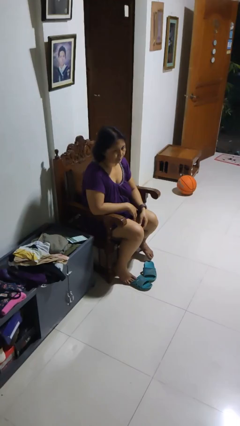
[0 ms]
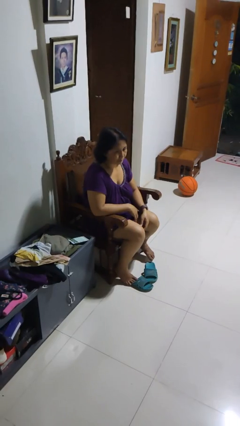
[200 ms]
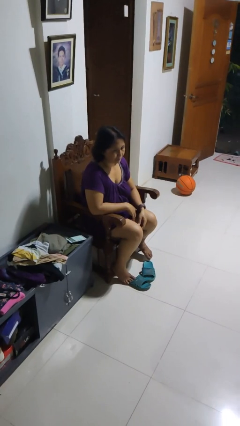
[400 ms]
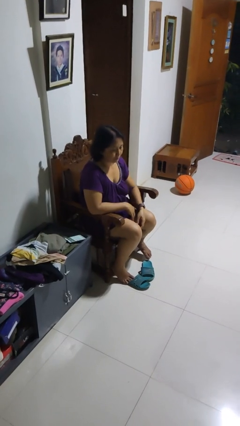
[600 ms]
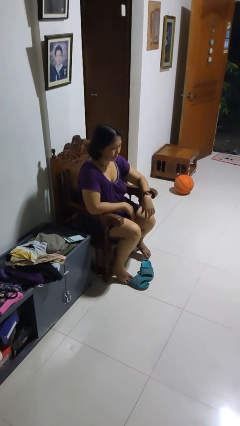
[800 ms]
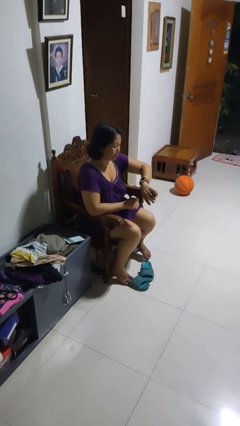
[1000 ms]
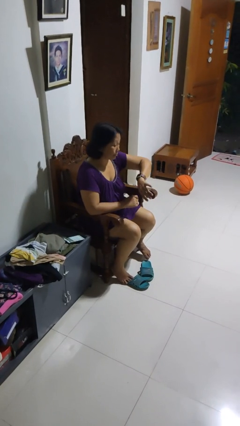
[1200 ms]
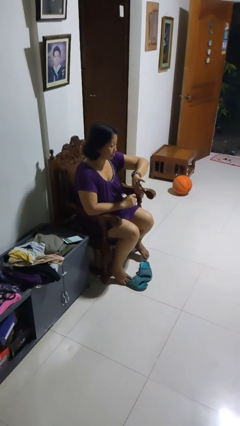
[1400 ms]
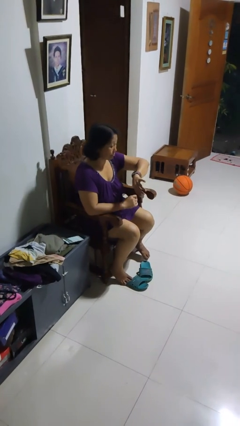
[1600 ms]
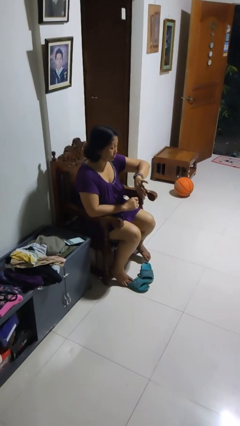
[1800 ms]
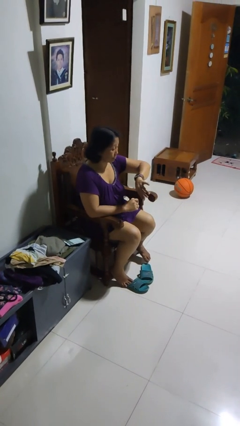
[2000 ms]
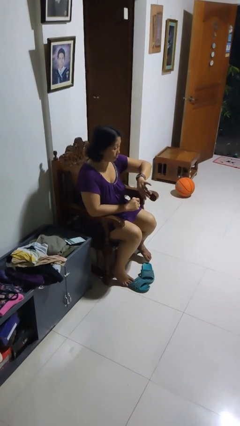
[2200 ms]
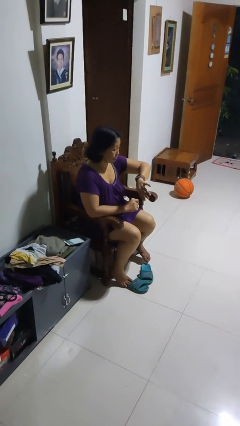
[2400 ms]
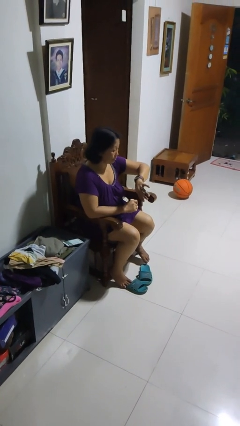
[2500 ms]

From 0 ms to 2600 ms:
person looks at wristwatch

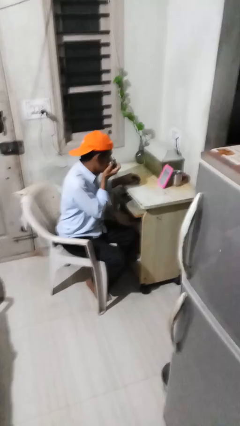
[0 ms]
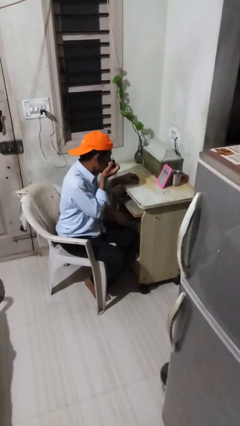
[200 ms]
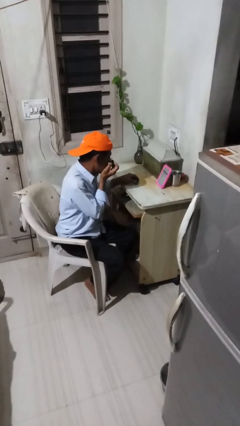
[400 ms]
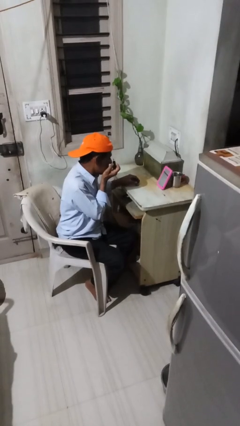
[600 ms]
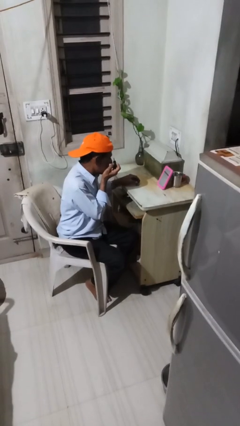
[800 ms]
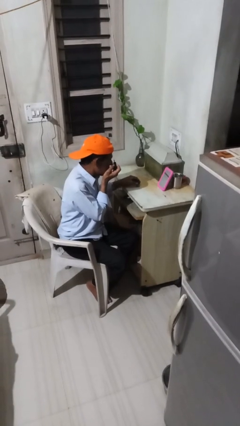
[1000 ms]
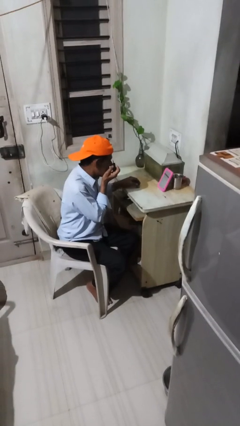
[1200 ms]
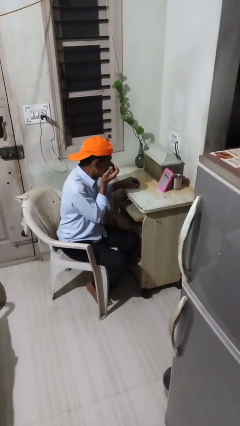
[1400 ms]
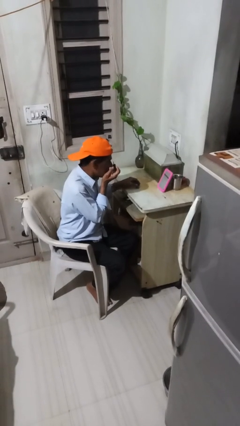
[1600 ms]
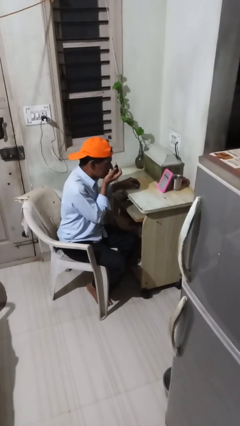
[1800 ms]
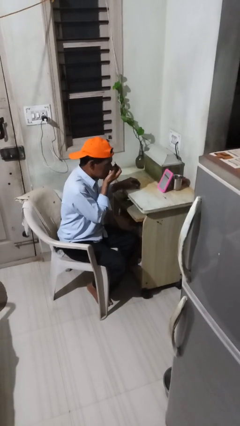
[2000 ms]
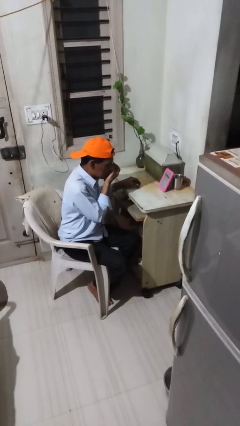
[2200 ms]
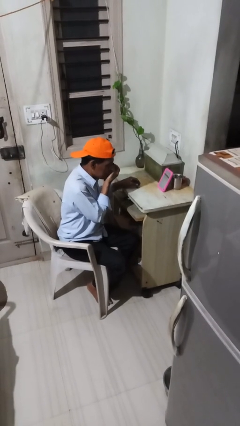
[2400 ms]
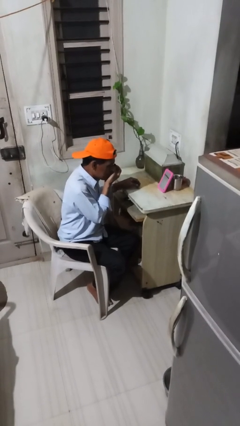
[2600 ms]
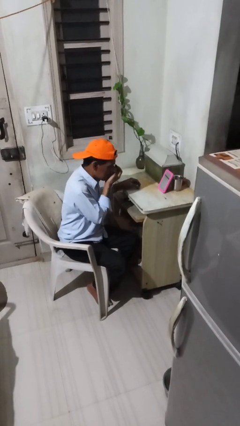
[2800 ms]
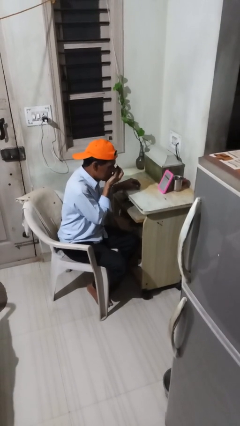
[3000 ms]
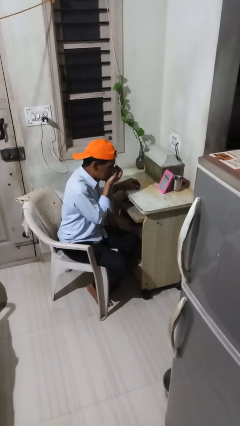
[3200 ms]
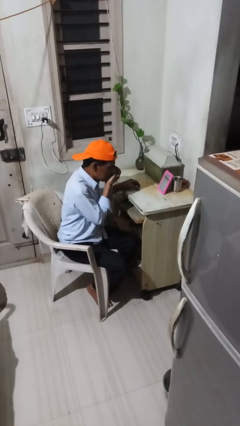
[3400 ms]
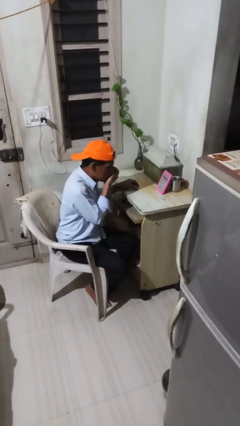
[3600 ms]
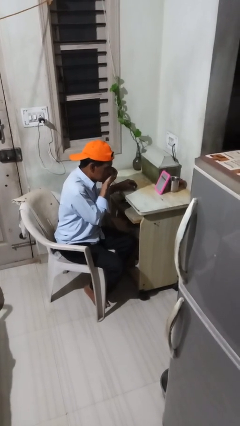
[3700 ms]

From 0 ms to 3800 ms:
person applies eye makeup

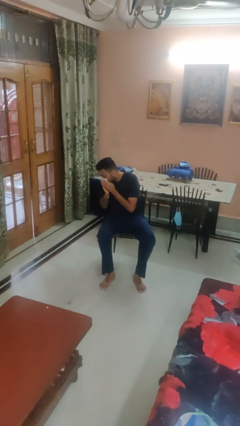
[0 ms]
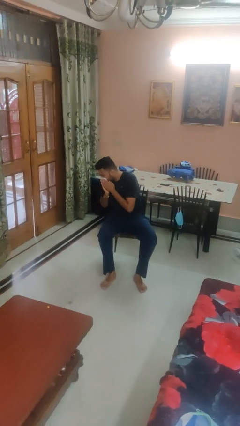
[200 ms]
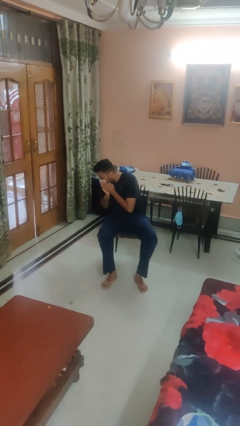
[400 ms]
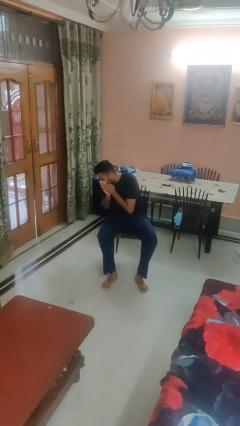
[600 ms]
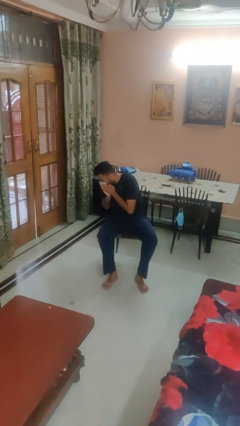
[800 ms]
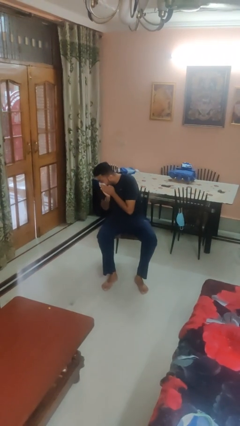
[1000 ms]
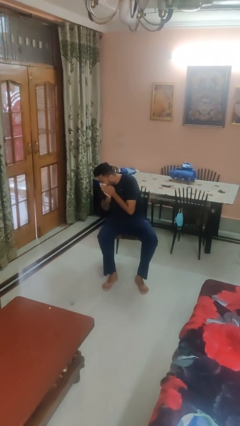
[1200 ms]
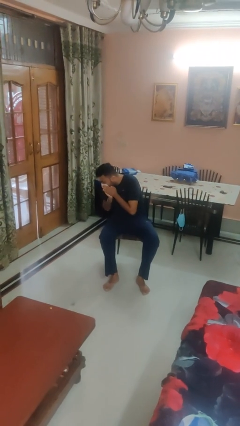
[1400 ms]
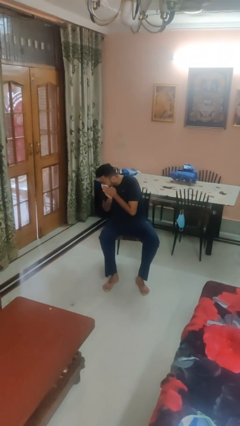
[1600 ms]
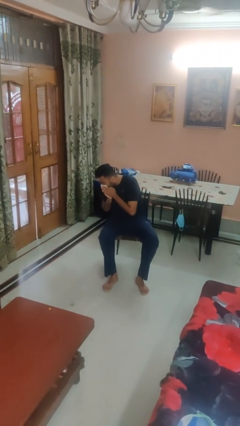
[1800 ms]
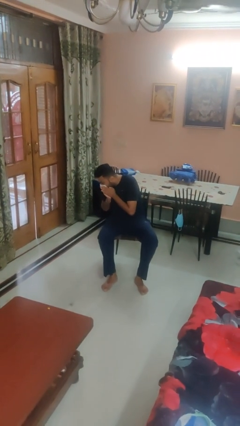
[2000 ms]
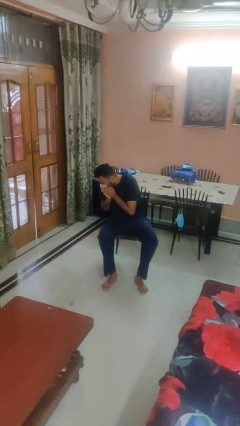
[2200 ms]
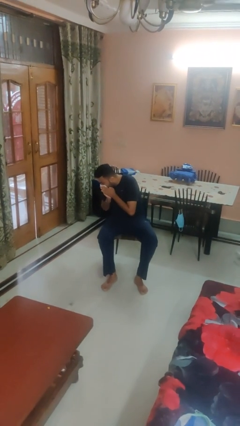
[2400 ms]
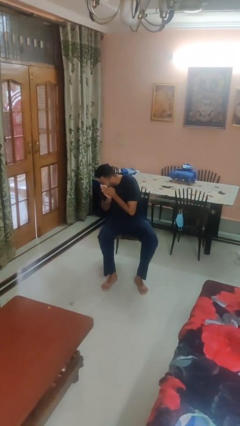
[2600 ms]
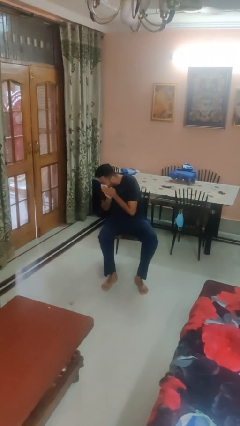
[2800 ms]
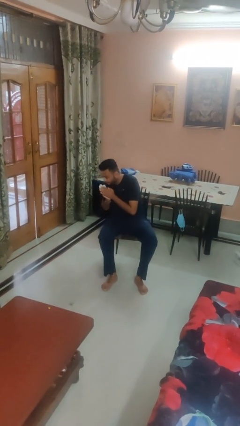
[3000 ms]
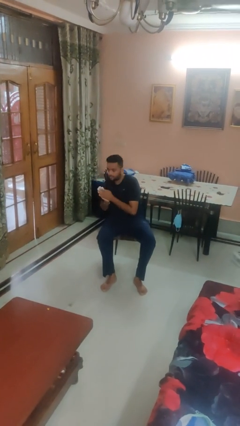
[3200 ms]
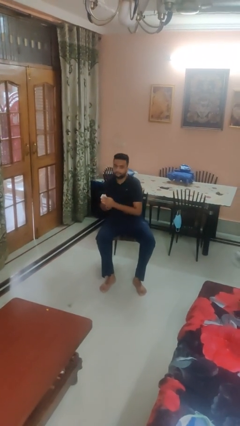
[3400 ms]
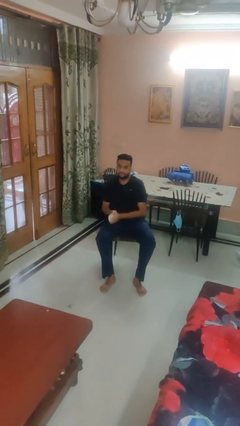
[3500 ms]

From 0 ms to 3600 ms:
person blows nose

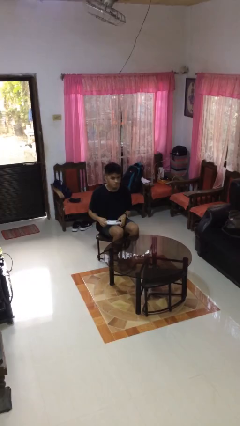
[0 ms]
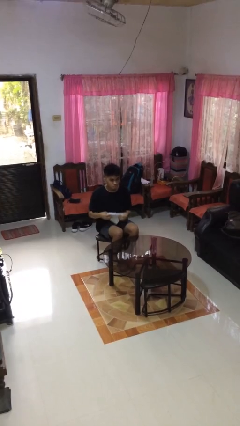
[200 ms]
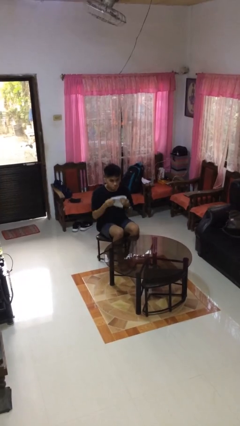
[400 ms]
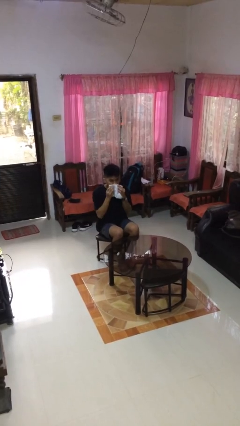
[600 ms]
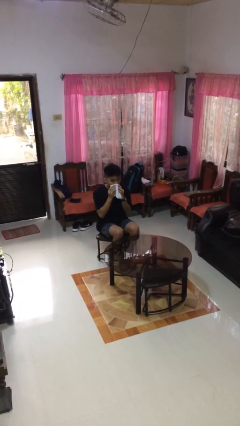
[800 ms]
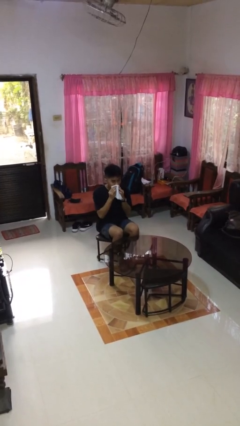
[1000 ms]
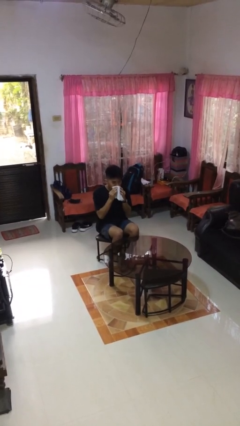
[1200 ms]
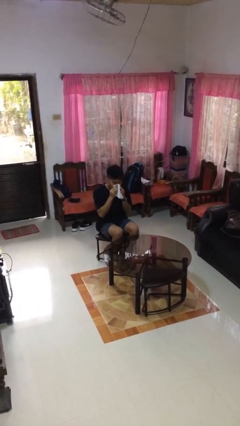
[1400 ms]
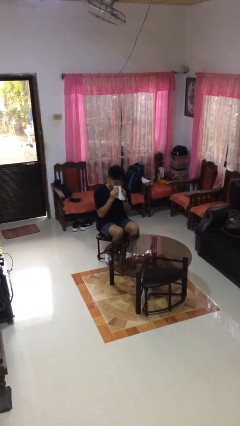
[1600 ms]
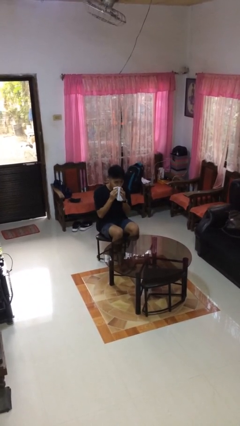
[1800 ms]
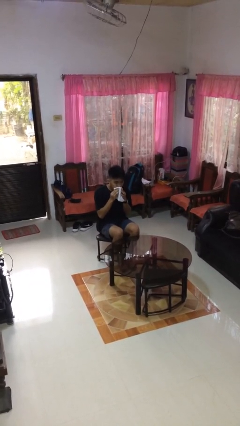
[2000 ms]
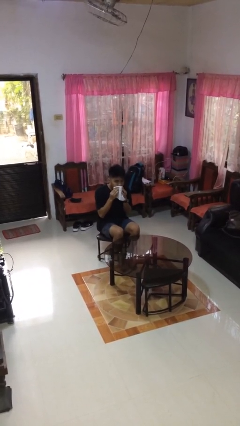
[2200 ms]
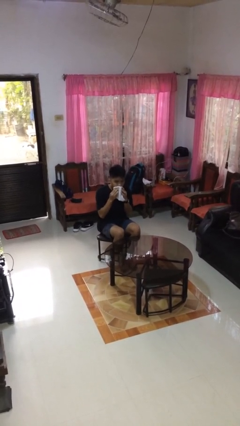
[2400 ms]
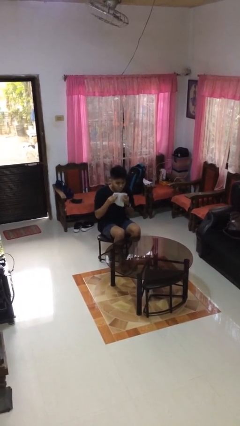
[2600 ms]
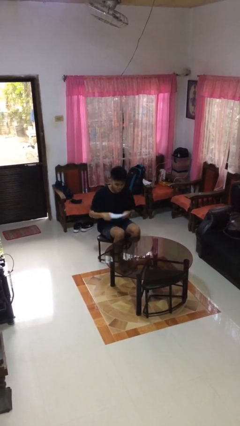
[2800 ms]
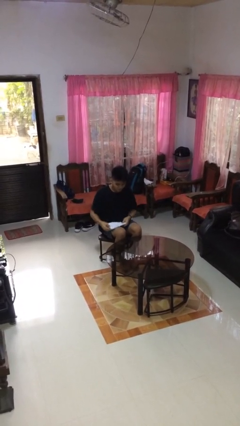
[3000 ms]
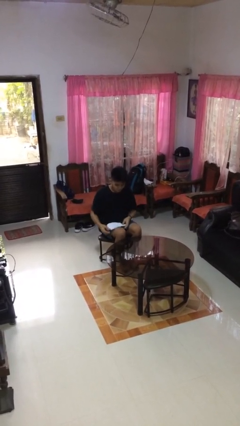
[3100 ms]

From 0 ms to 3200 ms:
person wipes mouth with napkin

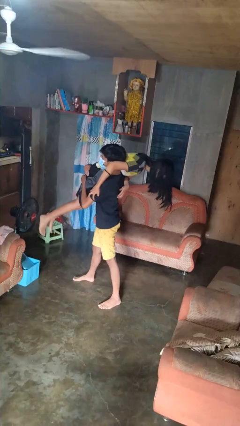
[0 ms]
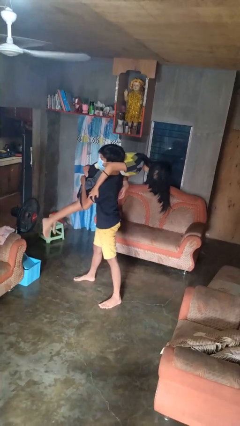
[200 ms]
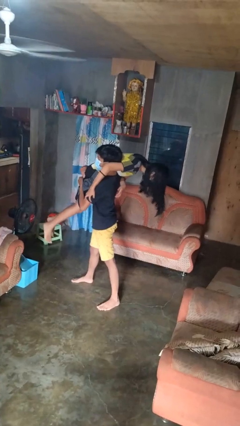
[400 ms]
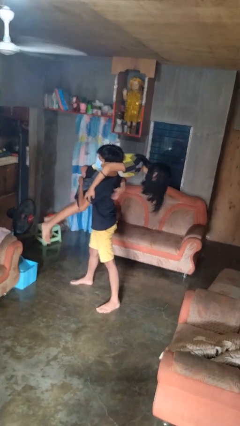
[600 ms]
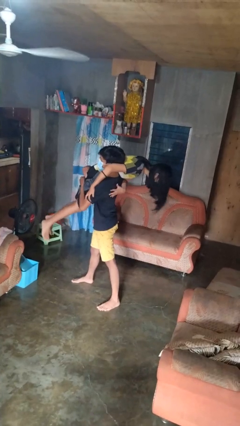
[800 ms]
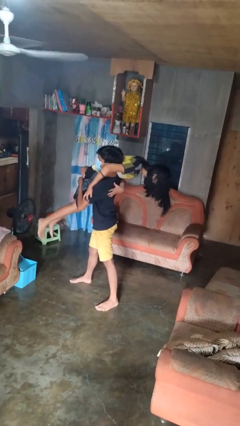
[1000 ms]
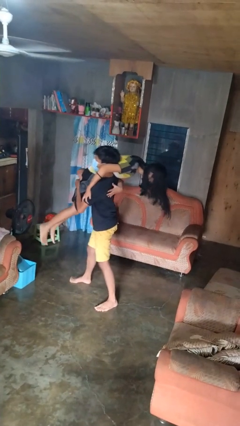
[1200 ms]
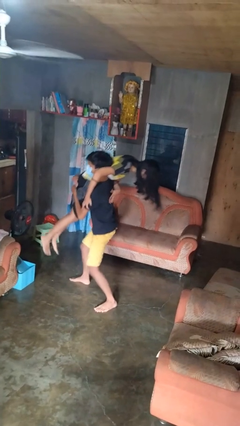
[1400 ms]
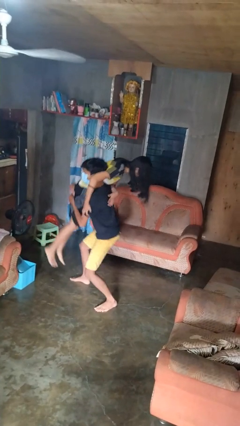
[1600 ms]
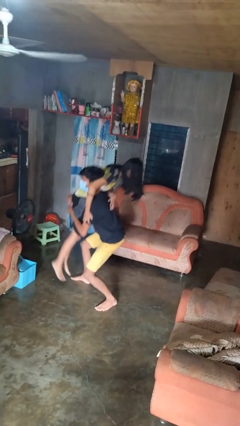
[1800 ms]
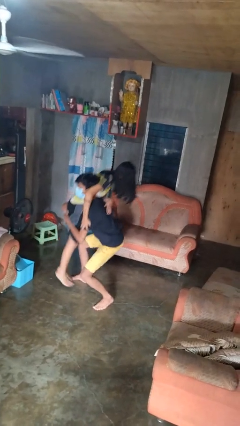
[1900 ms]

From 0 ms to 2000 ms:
person puts down person

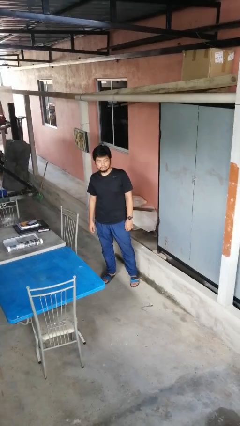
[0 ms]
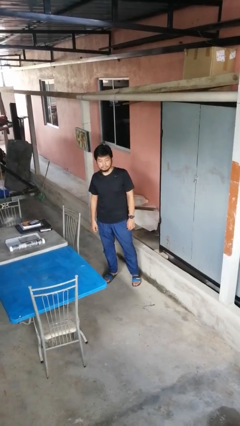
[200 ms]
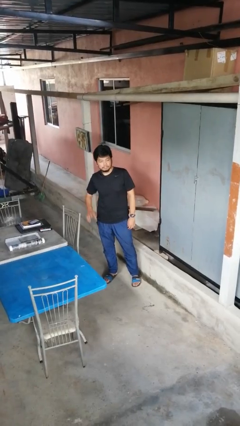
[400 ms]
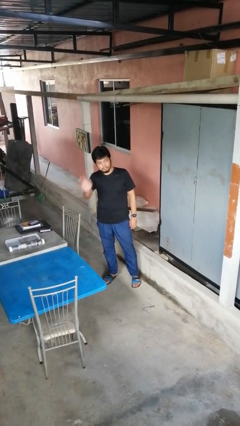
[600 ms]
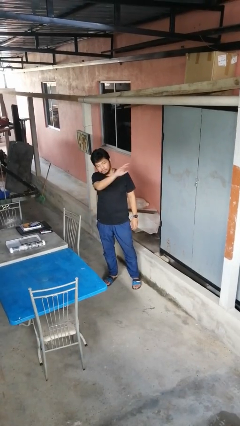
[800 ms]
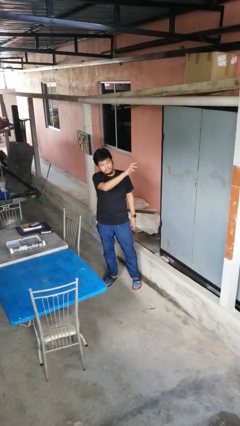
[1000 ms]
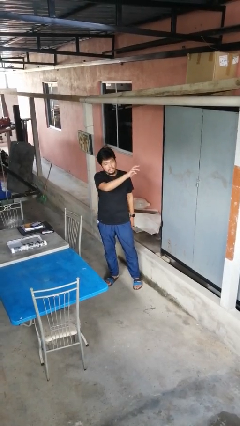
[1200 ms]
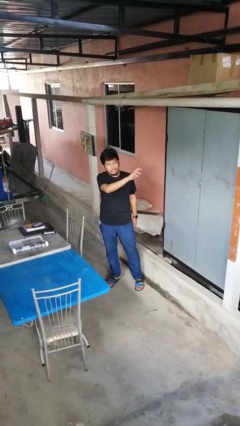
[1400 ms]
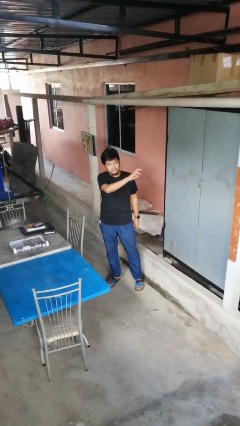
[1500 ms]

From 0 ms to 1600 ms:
person gestures swipe left

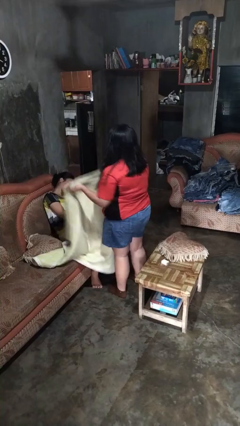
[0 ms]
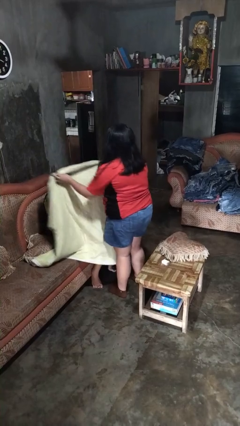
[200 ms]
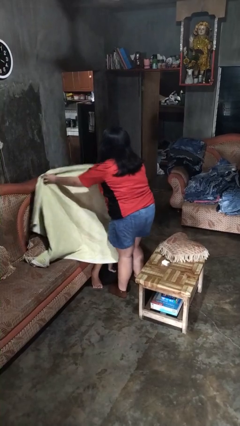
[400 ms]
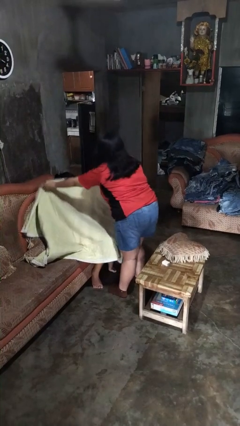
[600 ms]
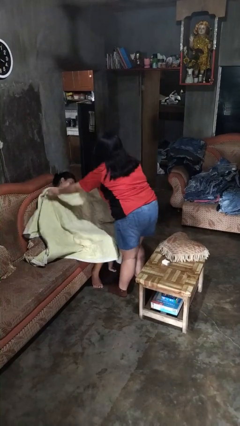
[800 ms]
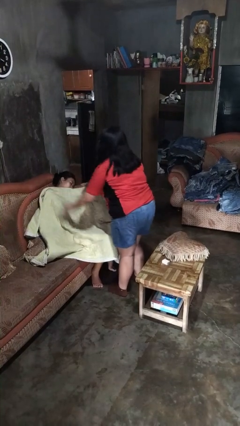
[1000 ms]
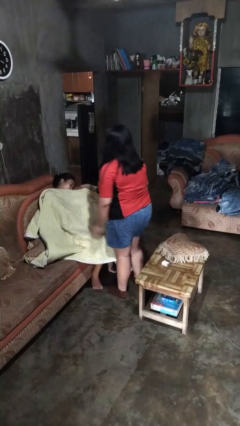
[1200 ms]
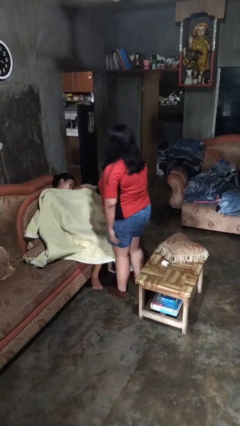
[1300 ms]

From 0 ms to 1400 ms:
person covers friend with blanket
